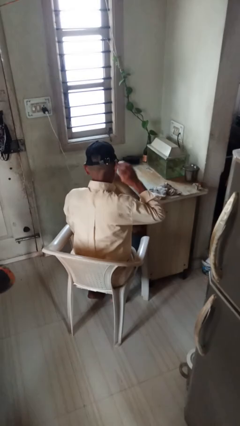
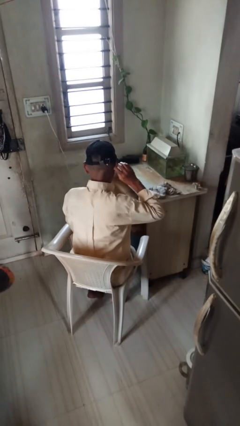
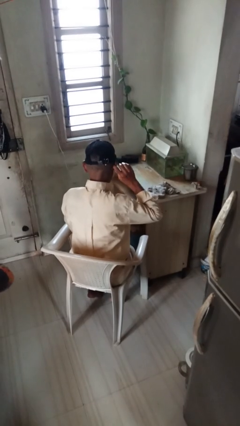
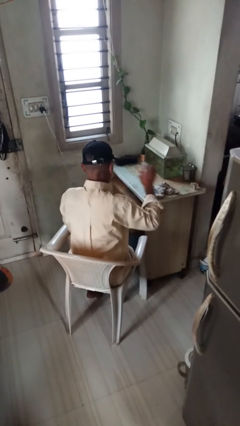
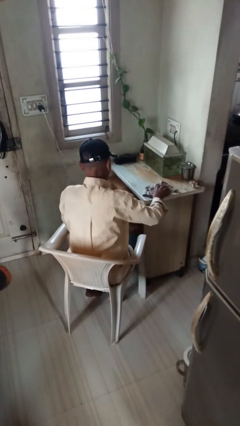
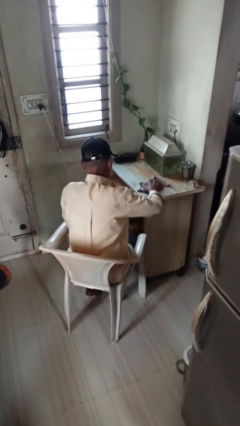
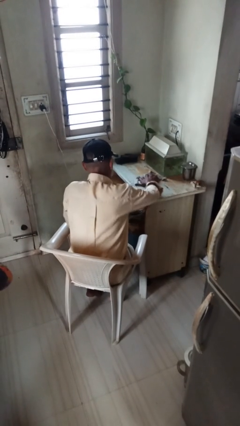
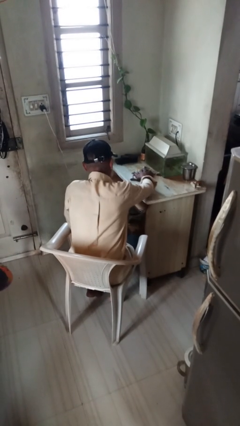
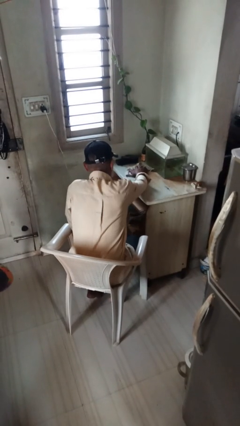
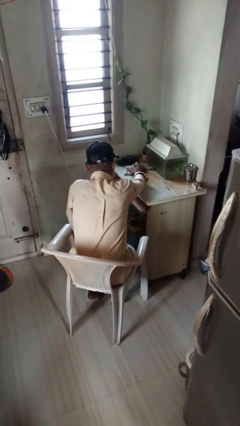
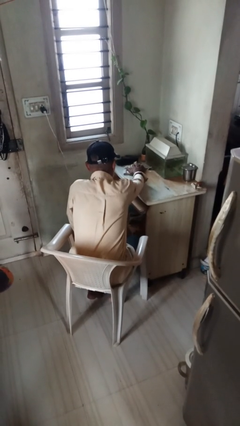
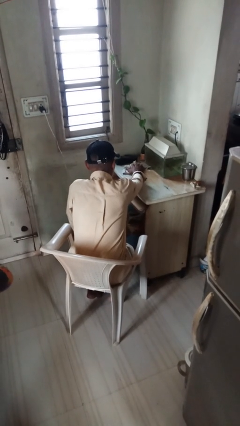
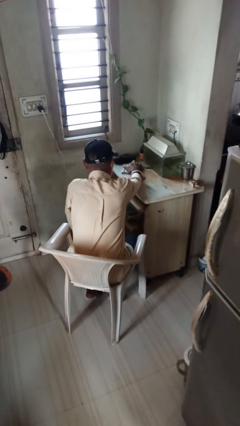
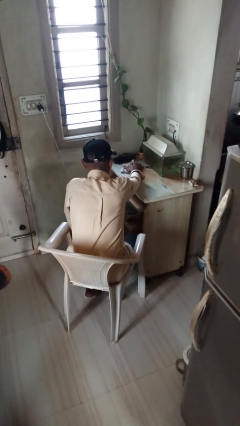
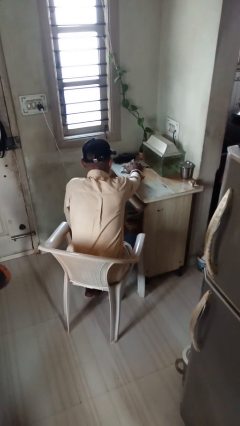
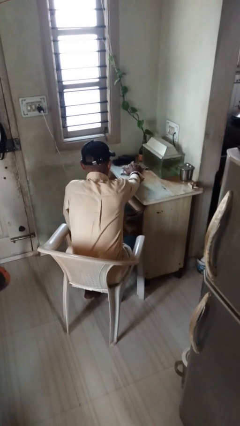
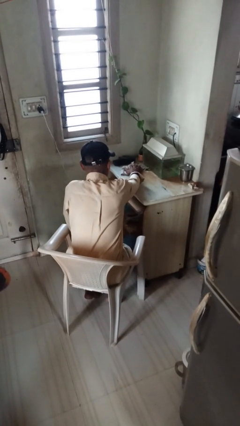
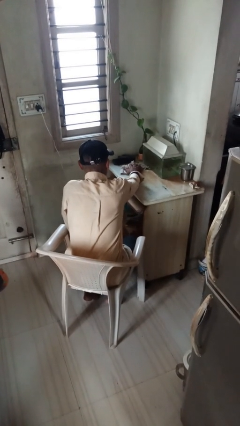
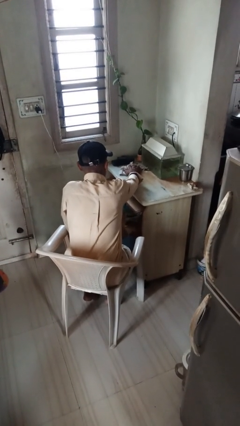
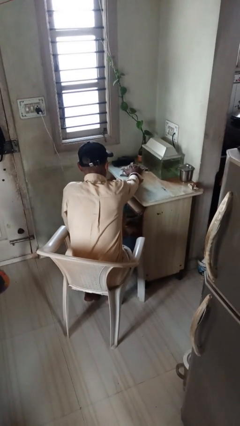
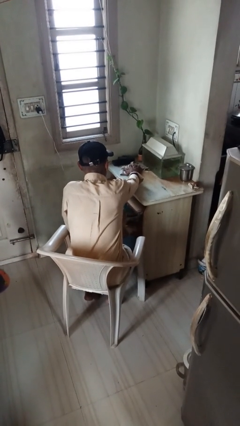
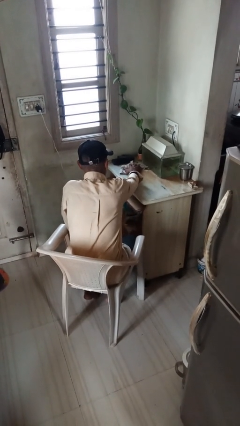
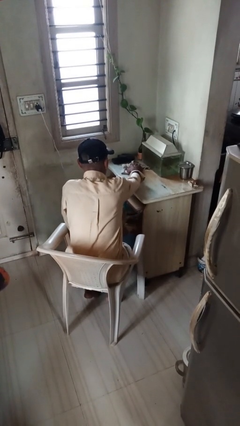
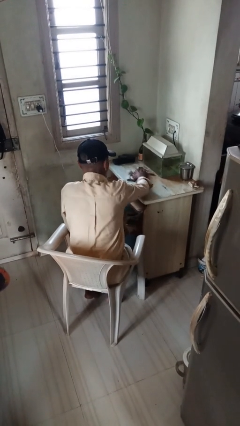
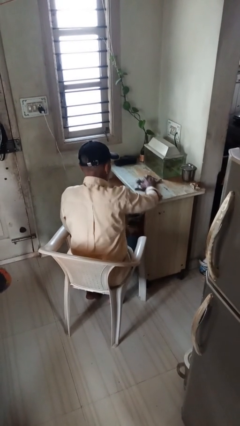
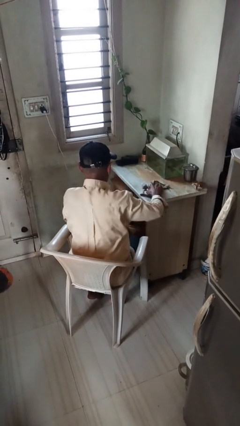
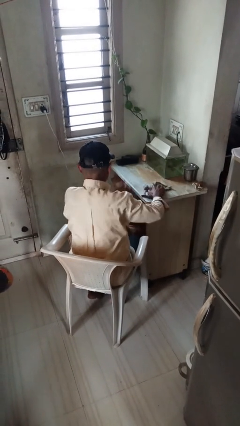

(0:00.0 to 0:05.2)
person cleans table with rag

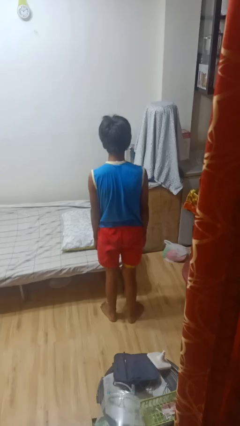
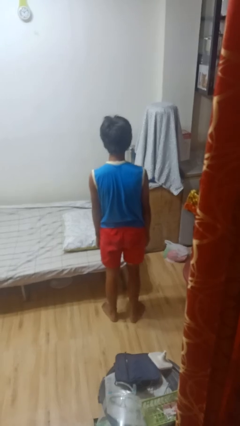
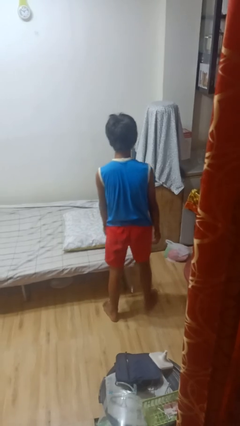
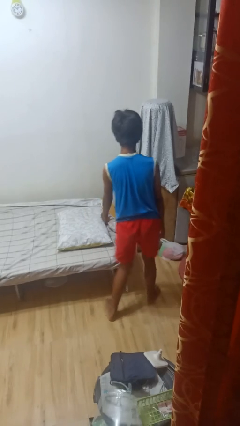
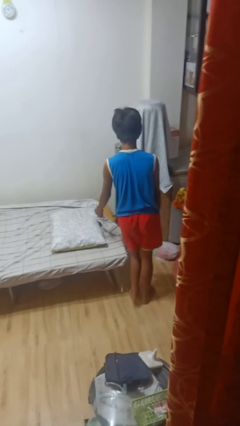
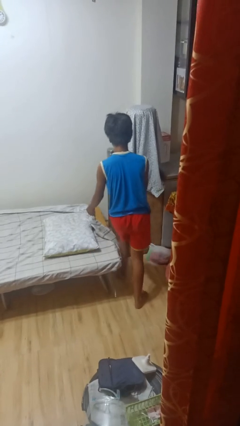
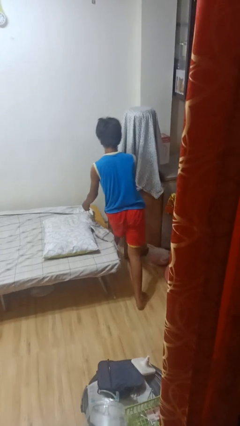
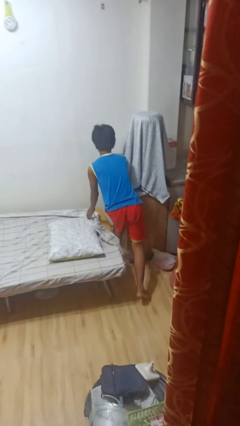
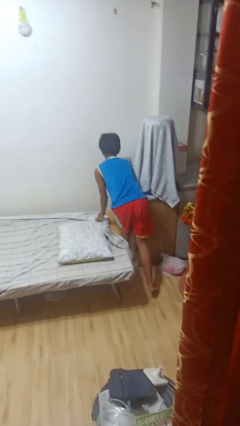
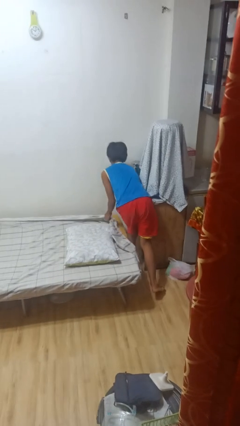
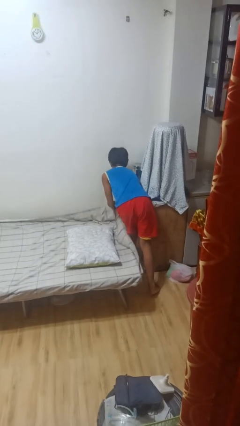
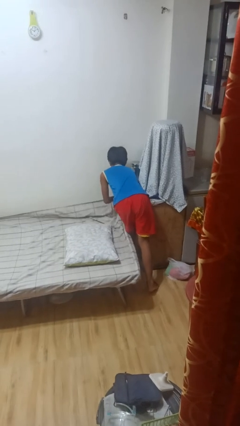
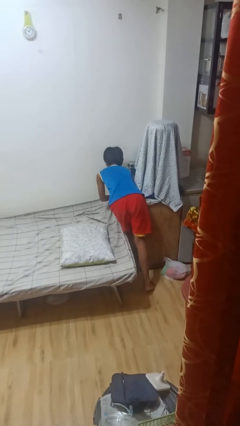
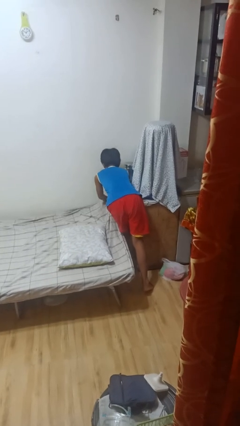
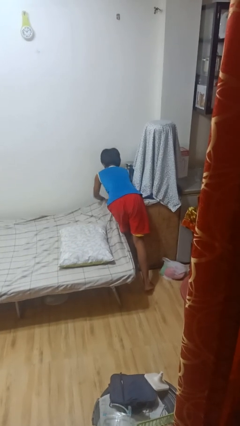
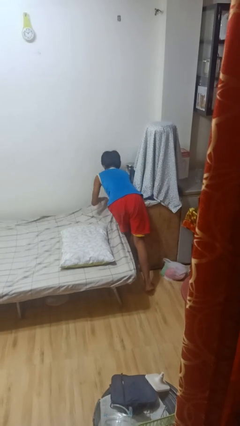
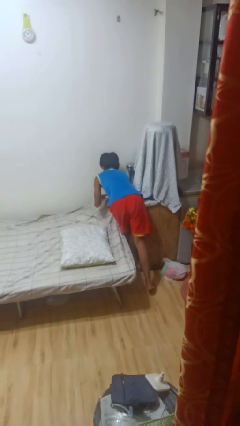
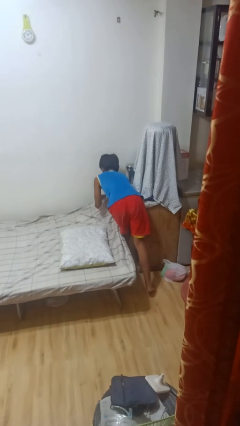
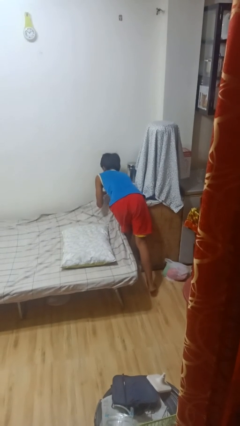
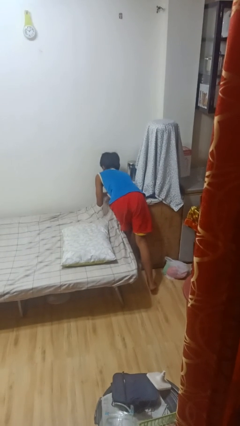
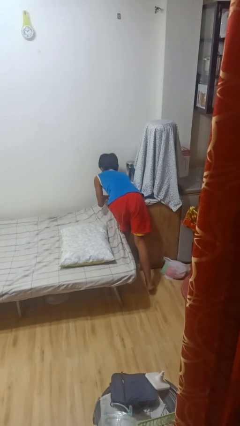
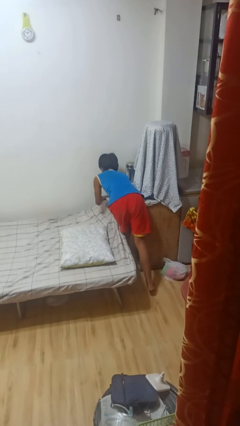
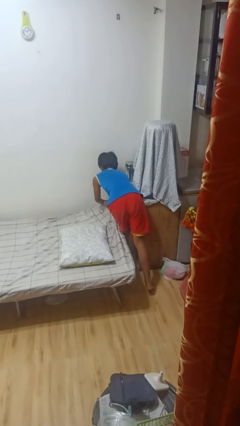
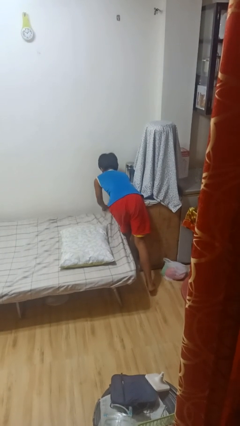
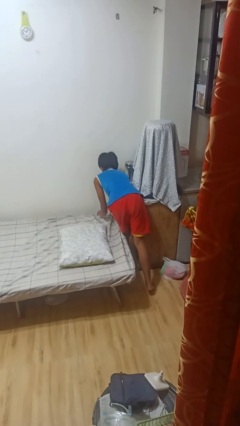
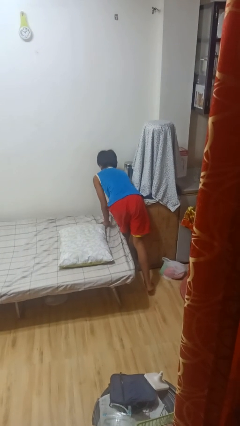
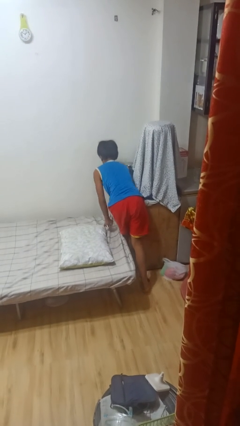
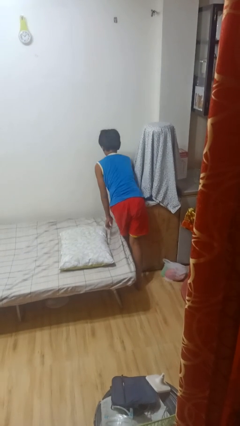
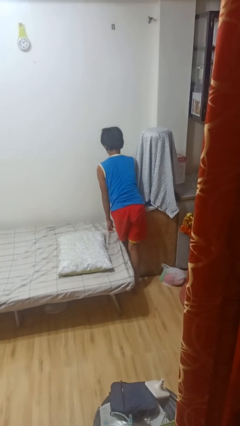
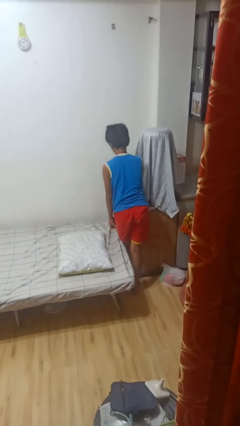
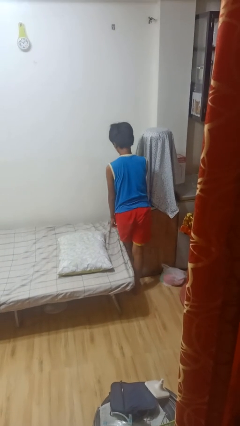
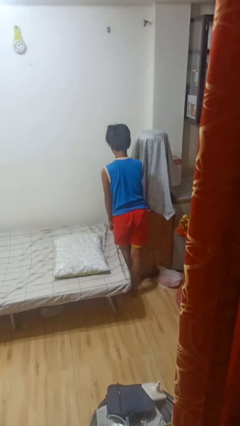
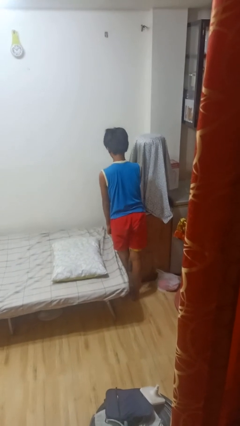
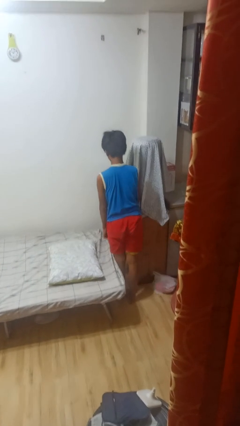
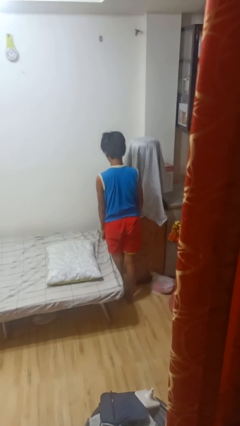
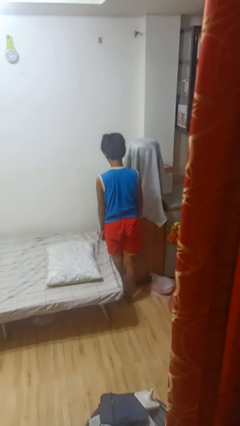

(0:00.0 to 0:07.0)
person makes bed

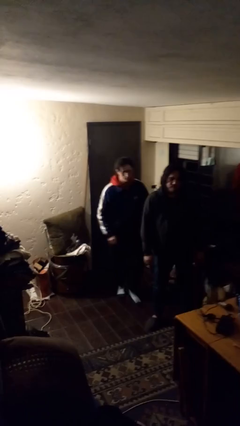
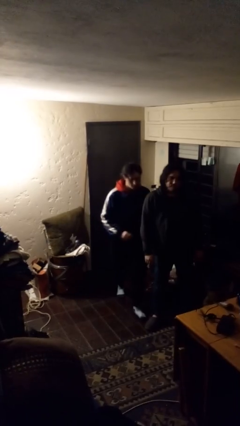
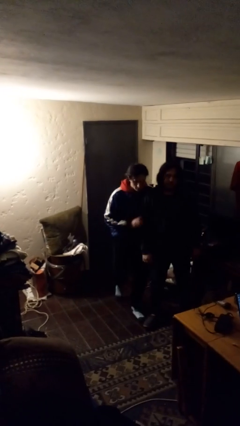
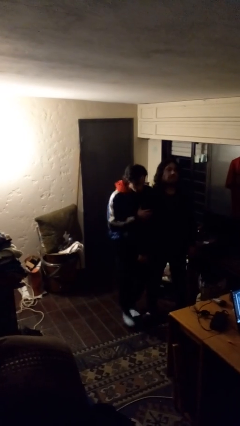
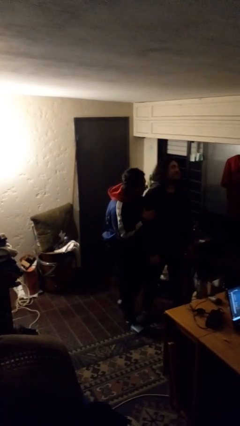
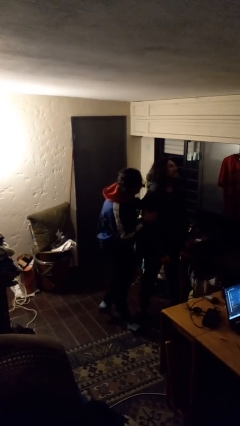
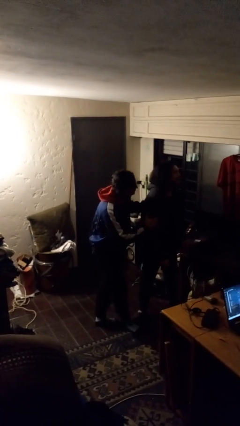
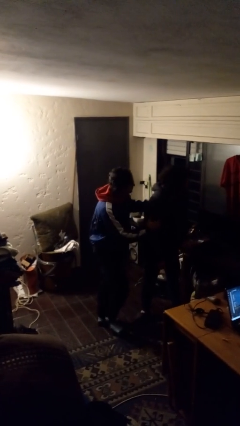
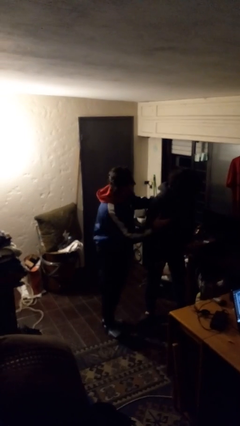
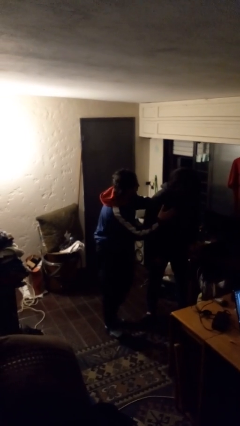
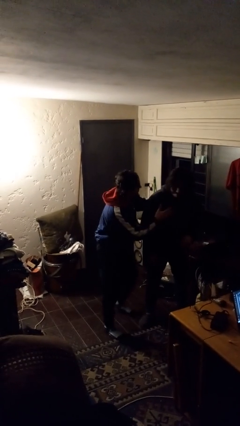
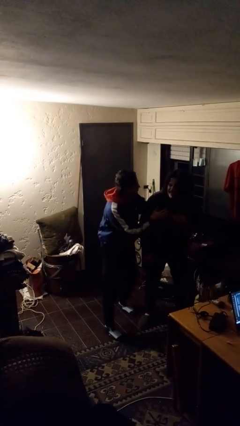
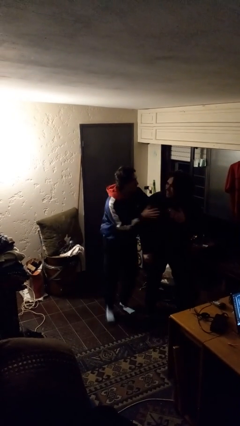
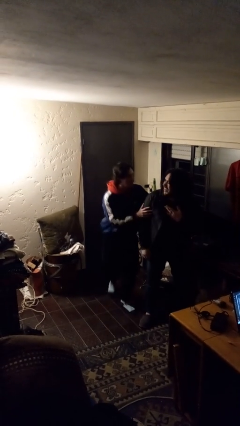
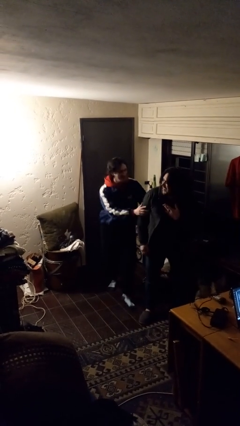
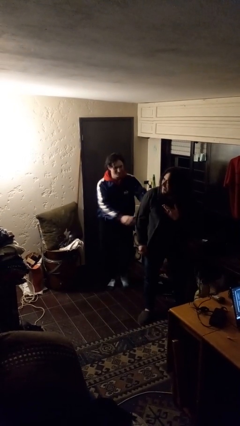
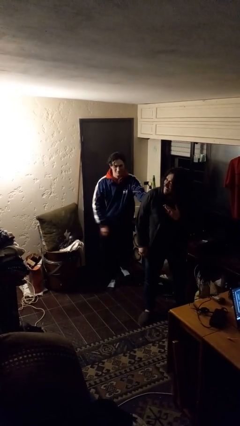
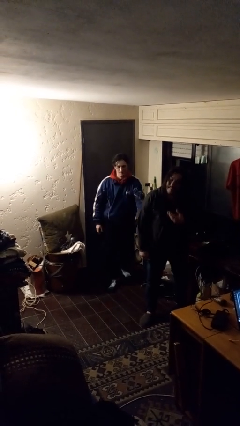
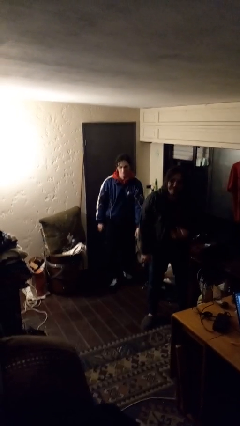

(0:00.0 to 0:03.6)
person bumps into person

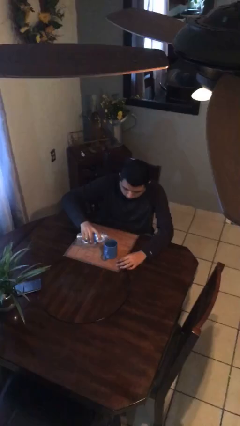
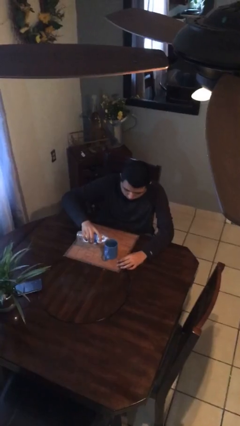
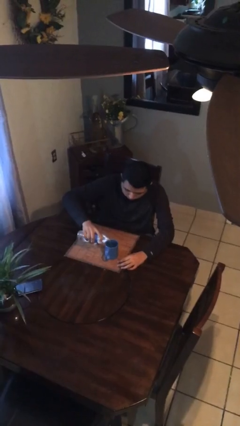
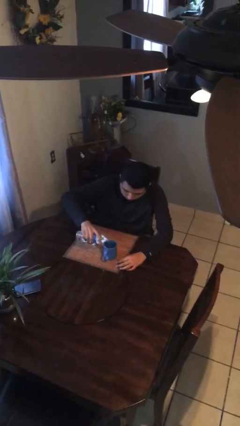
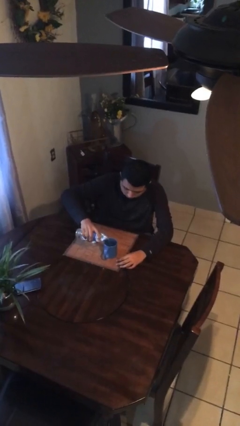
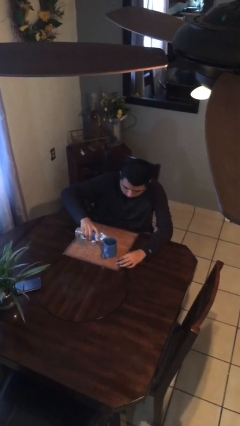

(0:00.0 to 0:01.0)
person pours liquid into cup

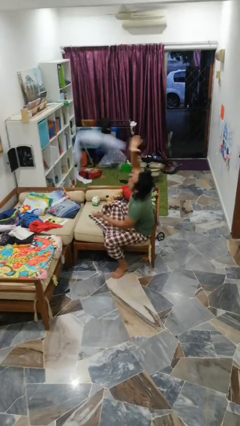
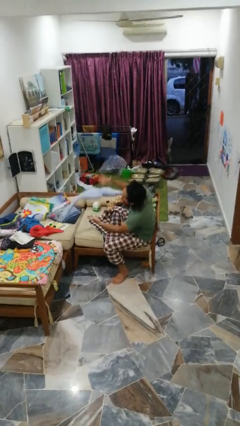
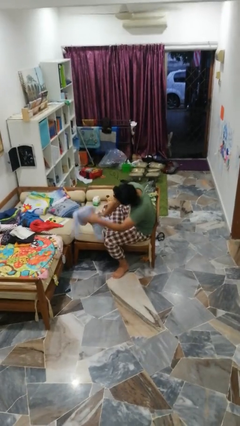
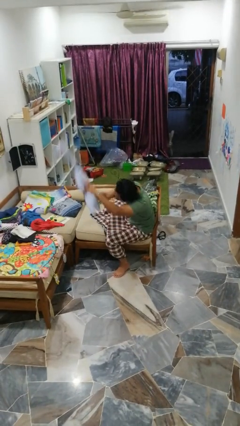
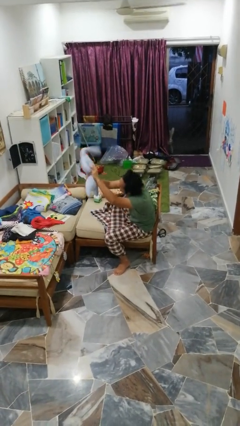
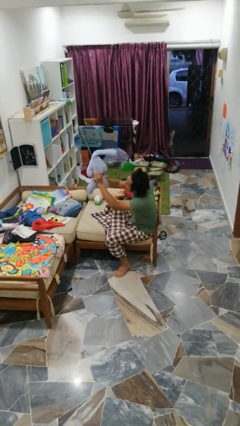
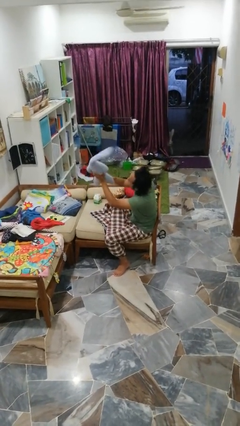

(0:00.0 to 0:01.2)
person catches dropped object
